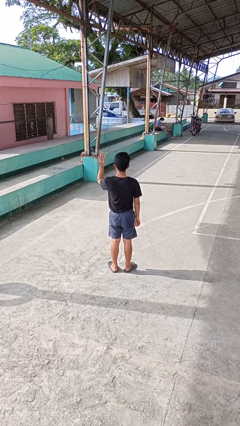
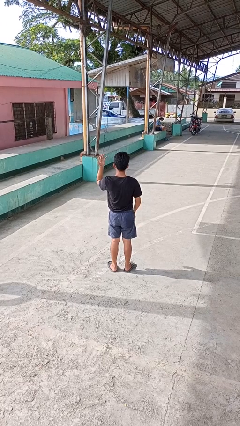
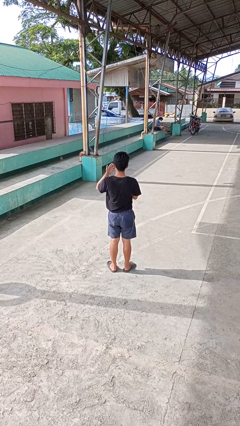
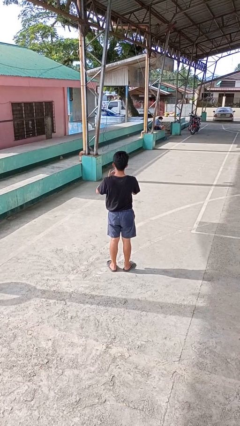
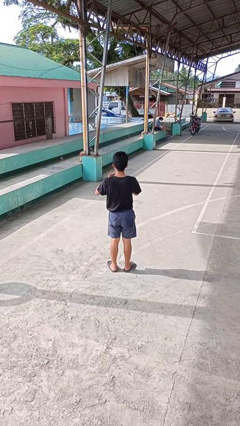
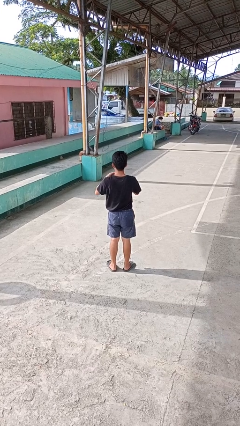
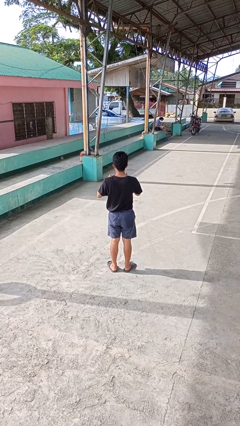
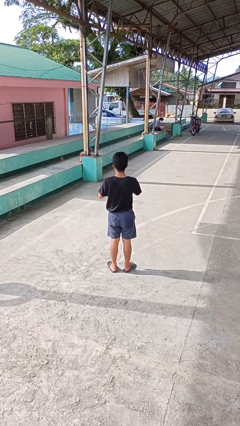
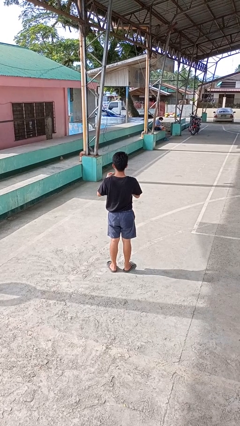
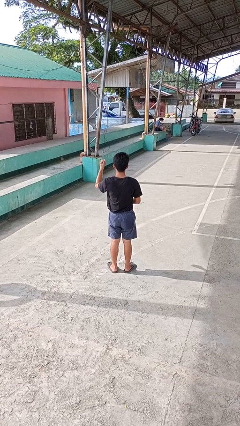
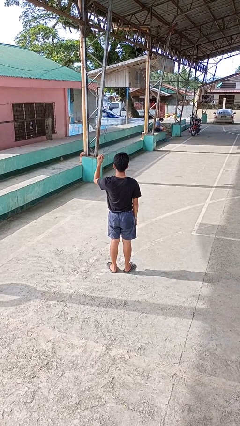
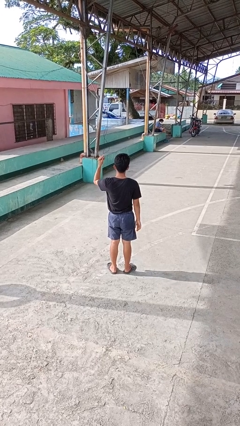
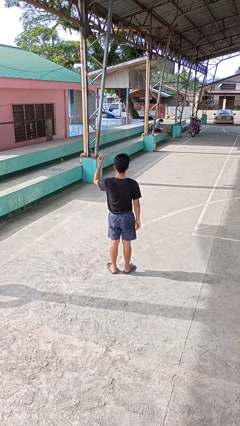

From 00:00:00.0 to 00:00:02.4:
person takes off ring

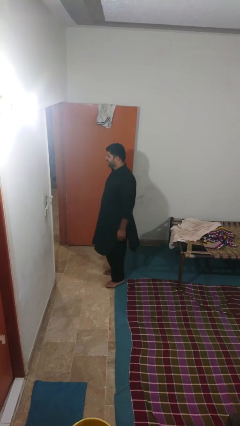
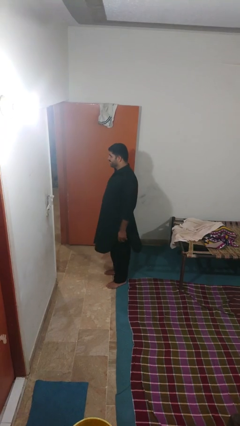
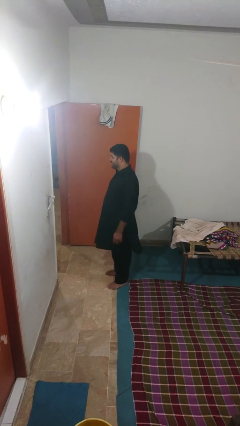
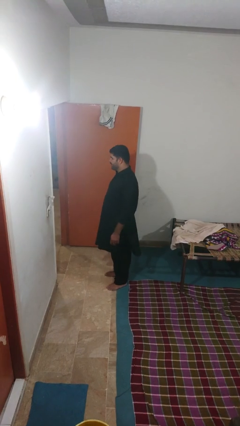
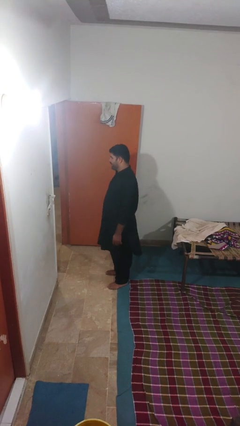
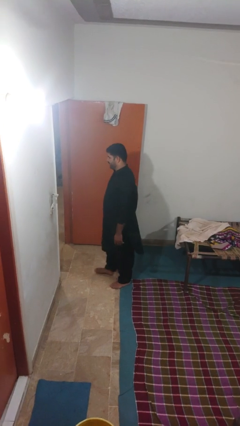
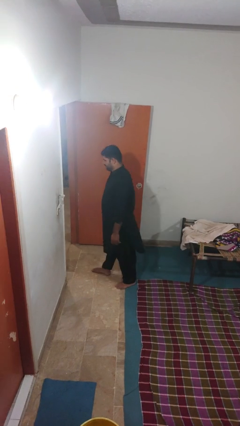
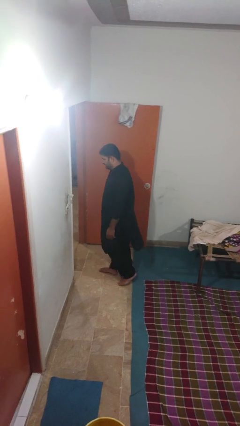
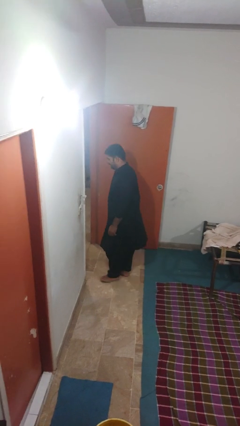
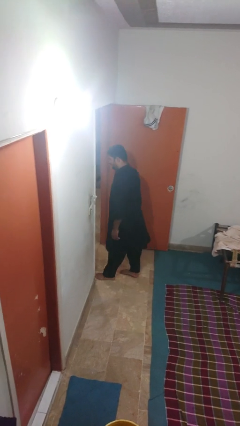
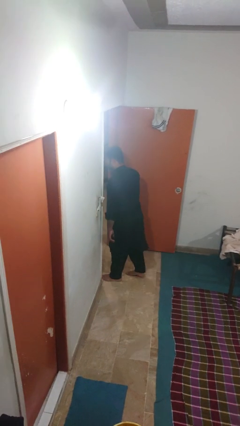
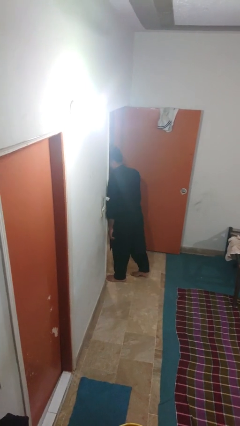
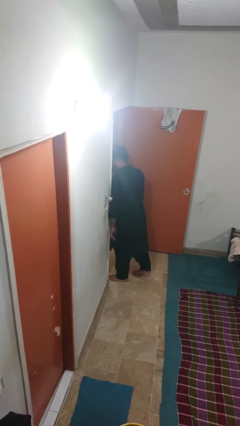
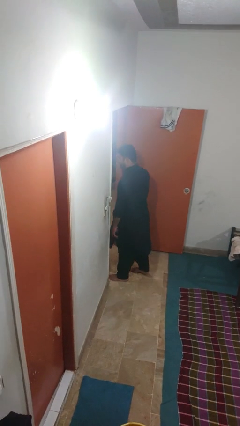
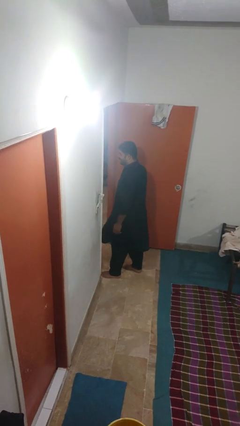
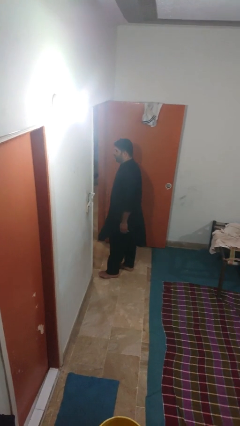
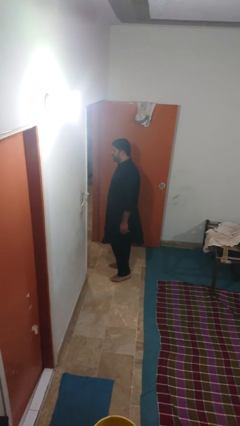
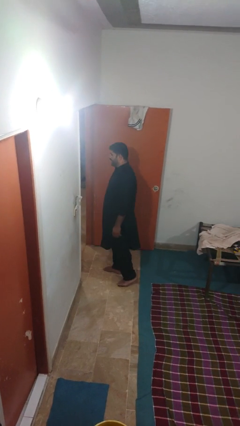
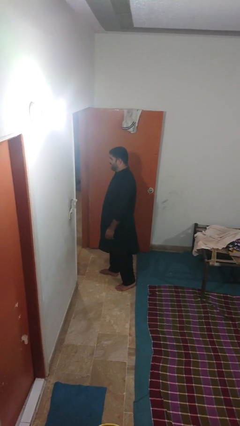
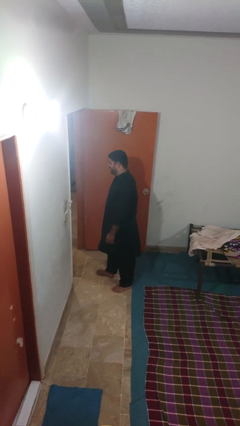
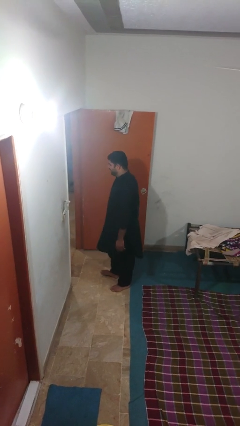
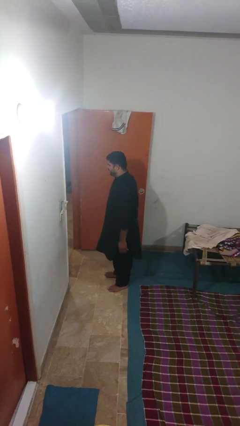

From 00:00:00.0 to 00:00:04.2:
person bumps into wall

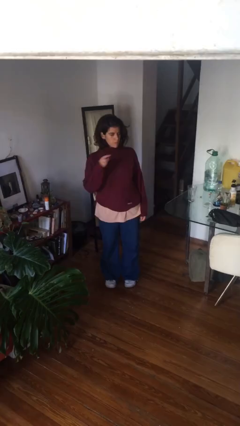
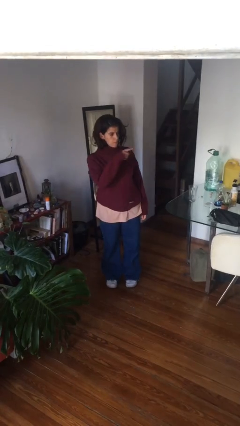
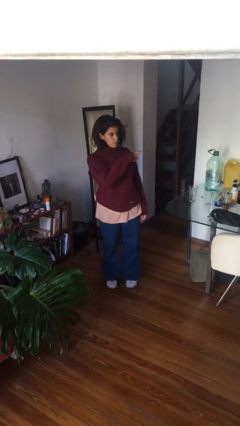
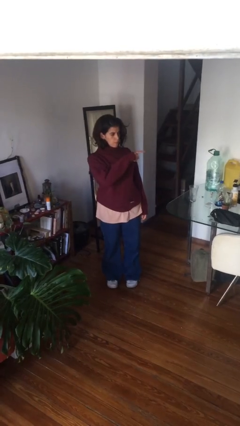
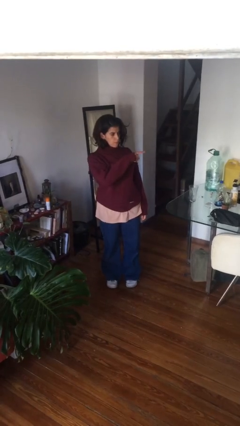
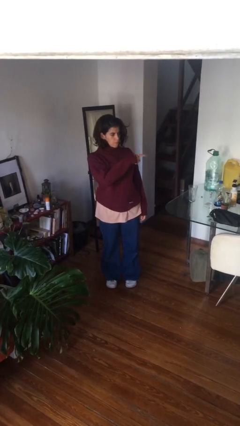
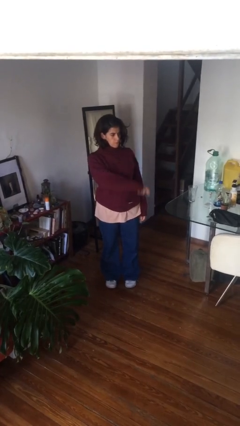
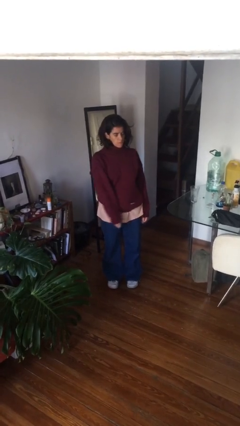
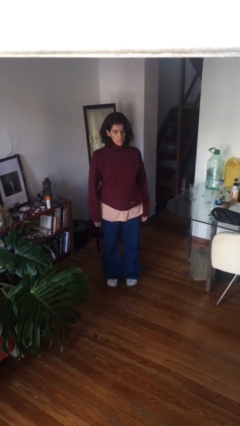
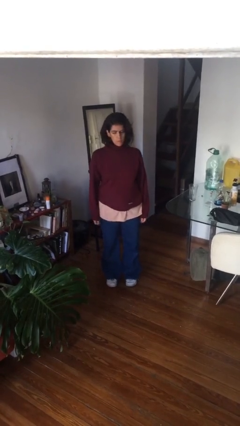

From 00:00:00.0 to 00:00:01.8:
person gestures swipe left

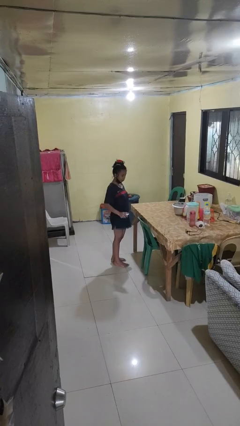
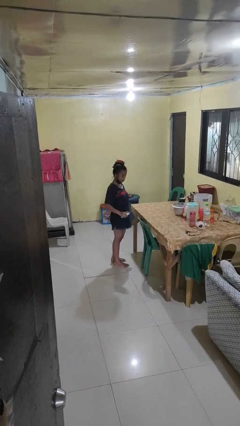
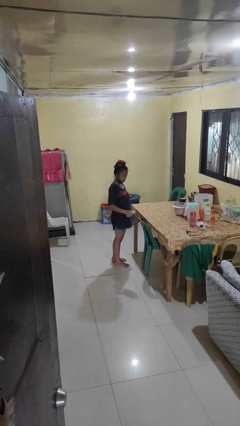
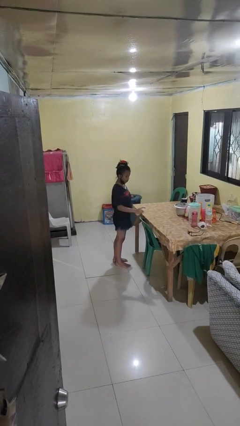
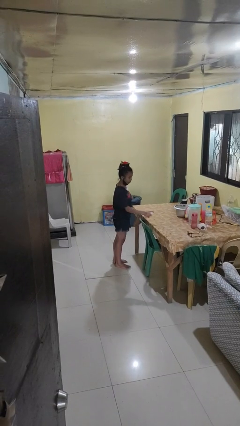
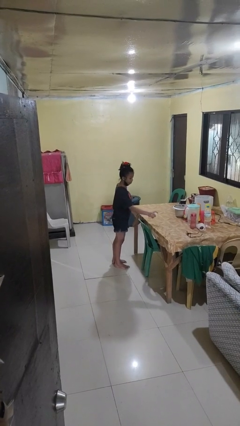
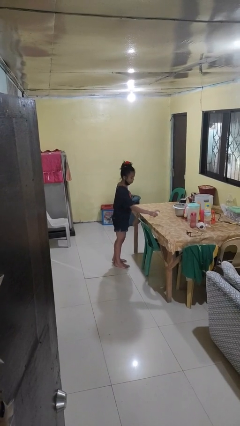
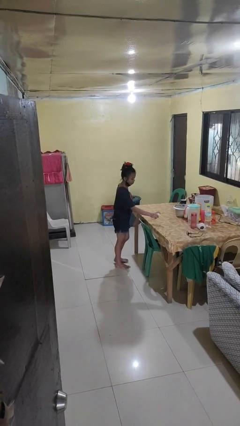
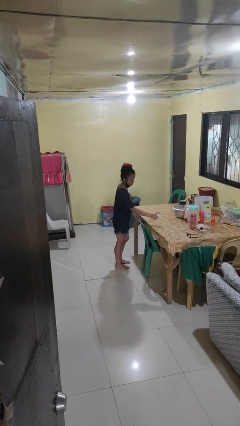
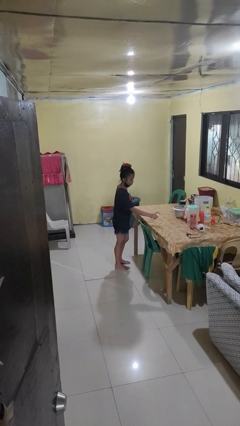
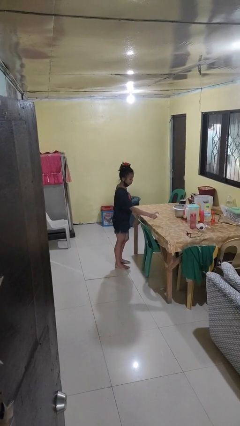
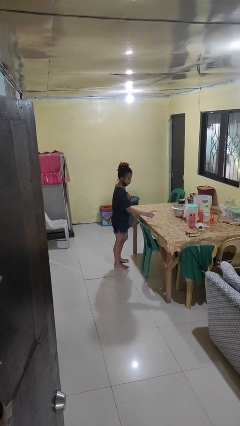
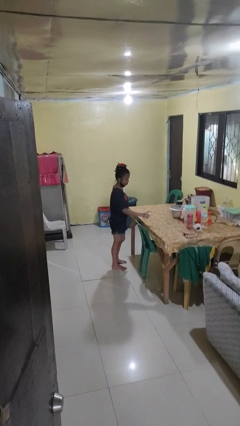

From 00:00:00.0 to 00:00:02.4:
person sprays from bottle

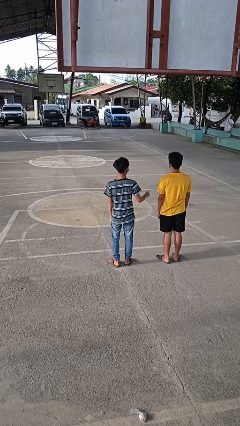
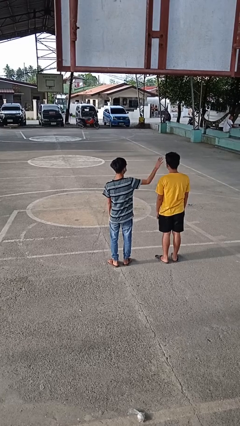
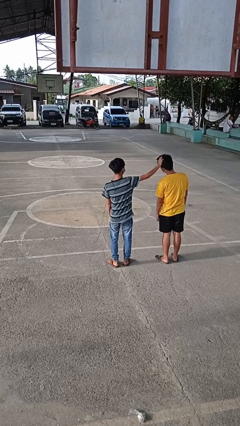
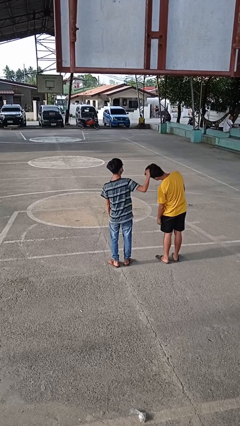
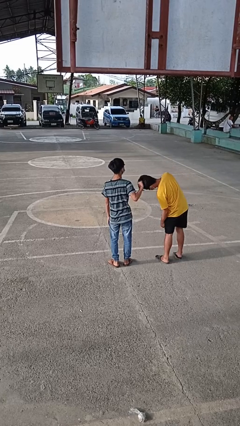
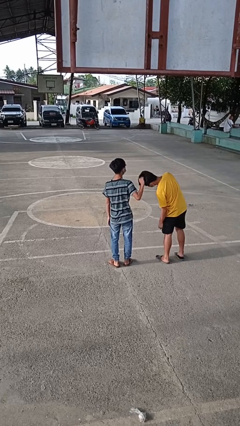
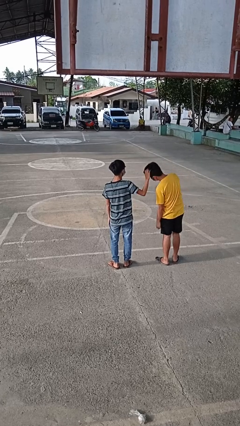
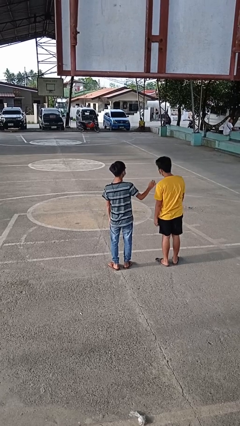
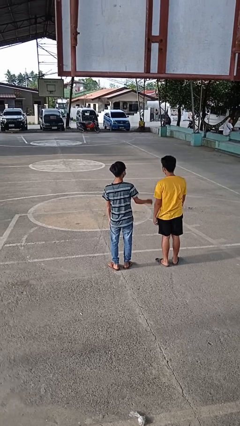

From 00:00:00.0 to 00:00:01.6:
person grabs person by hair

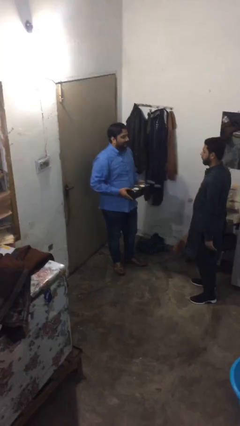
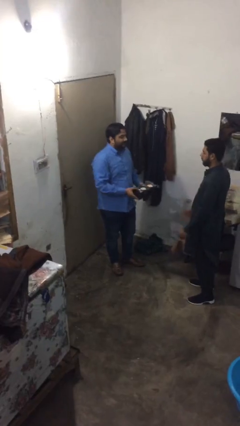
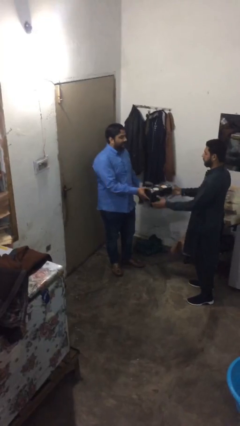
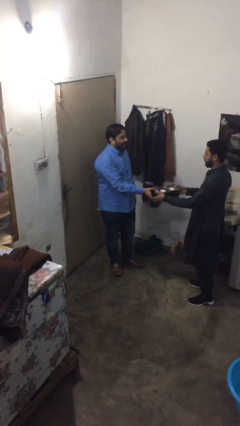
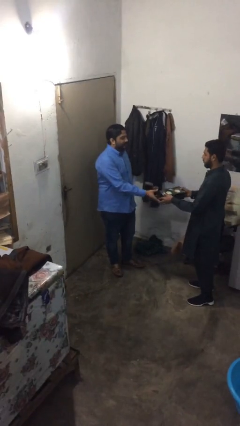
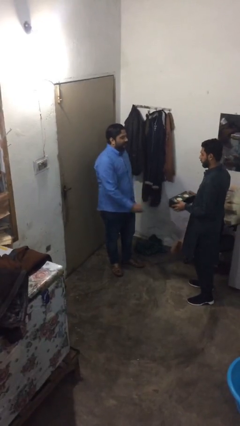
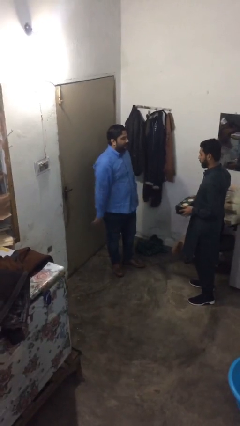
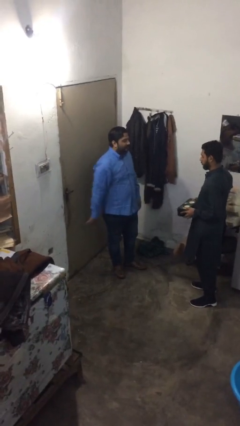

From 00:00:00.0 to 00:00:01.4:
person transfers object to person

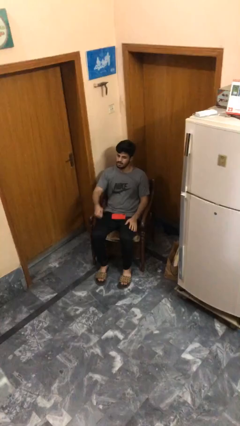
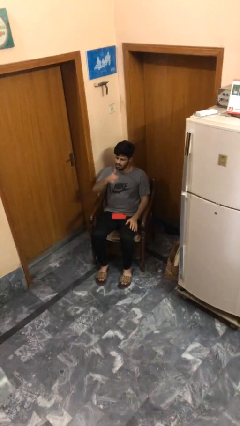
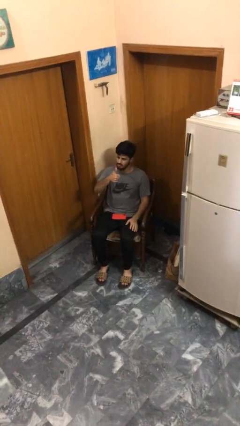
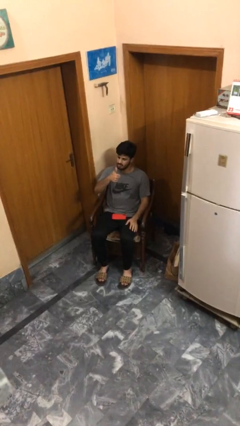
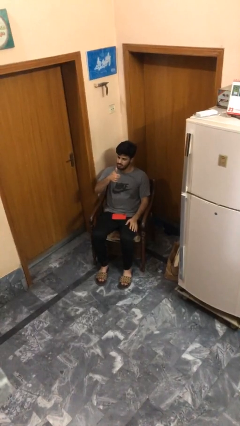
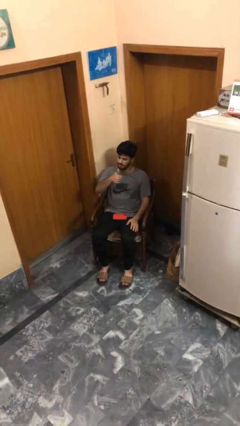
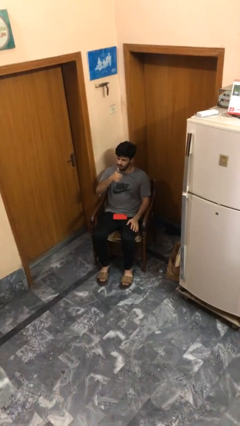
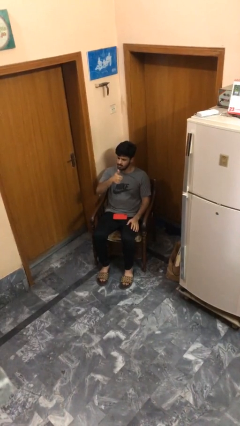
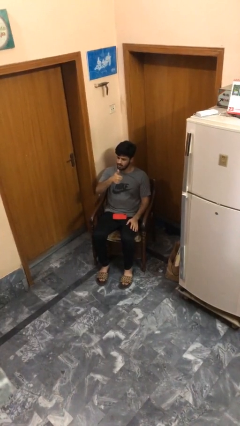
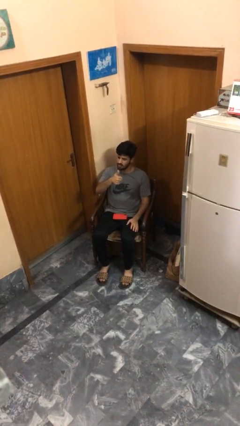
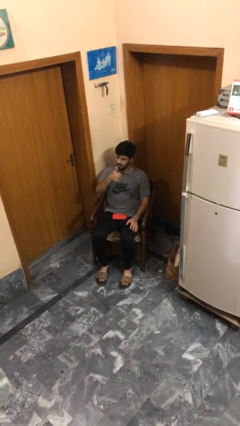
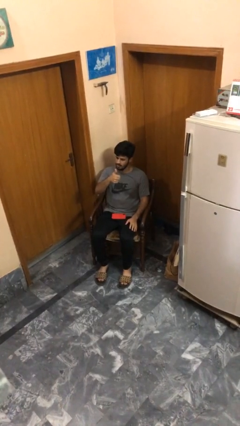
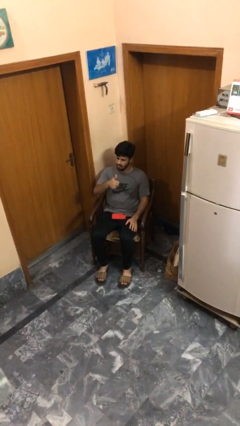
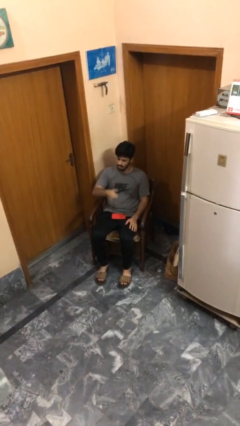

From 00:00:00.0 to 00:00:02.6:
person gestures thumbs up

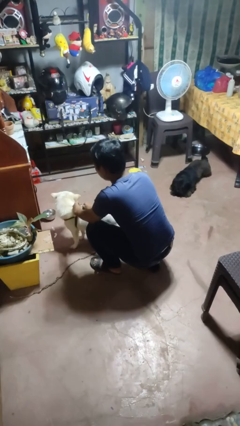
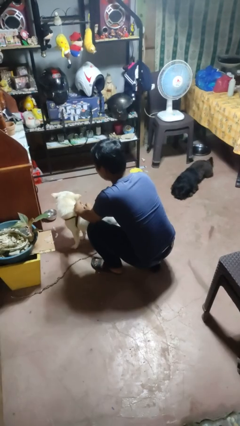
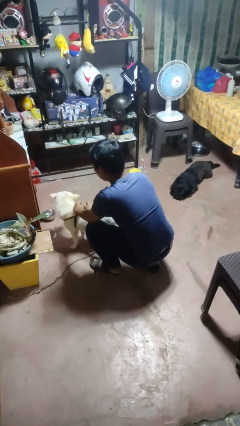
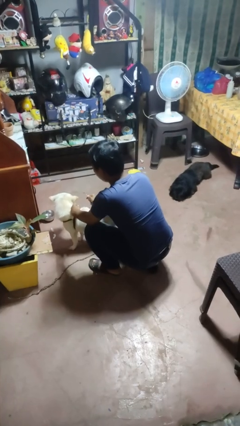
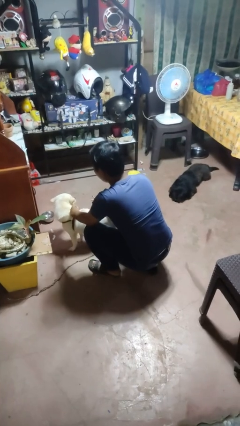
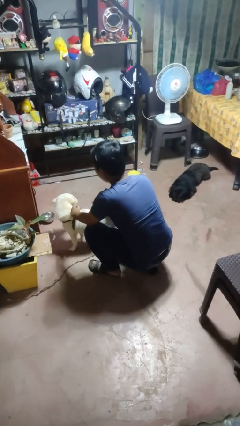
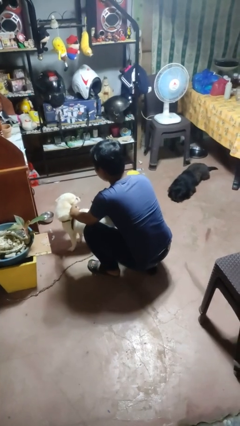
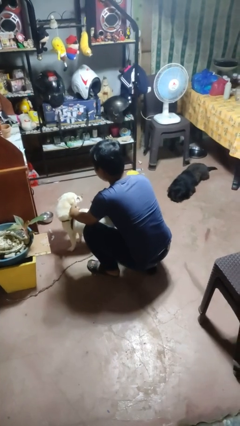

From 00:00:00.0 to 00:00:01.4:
person unattaches leash from dog
